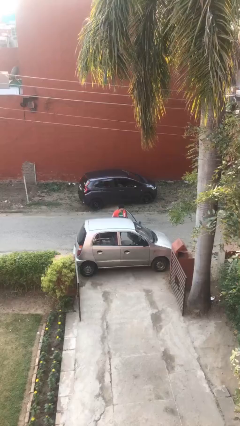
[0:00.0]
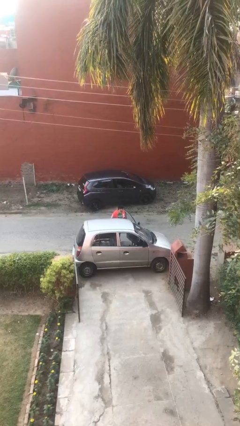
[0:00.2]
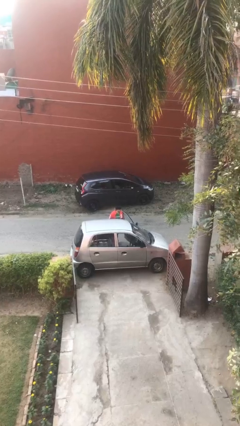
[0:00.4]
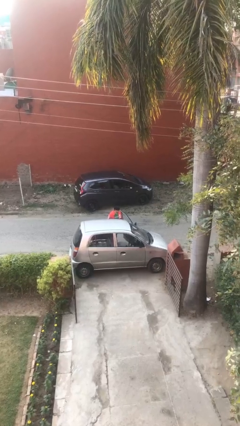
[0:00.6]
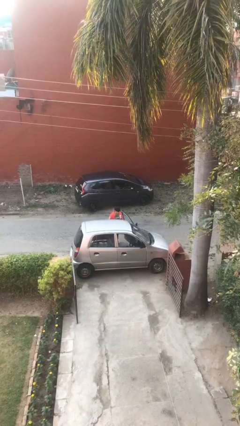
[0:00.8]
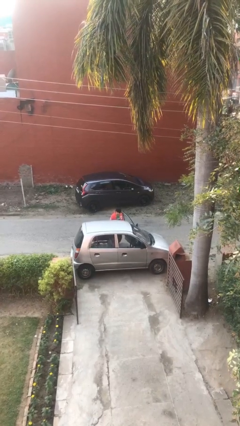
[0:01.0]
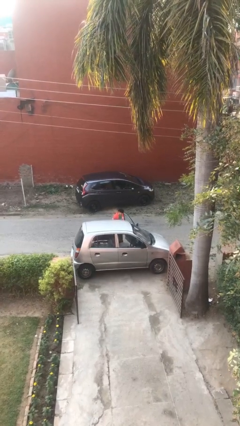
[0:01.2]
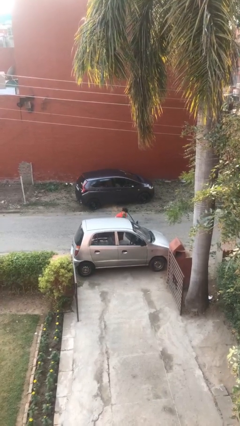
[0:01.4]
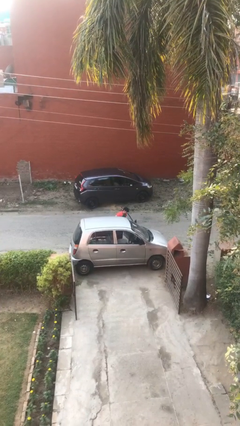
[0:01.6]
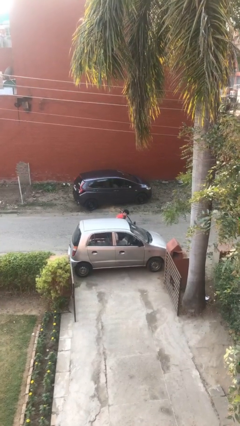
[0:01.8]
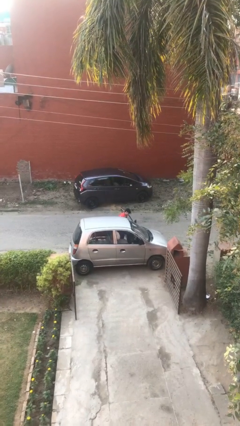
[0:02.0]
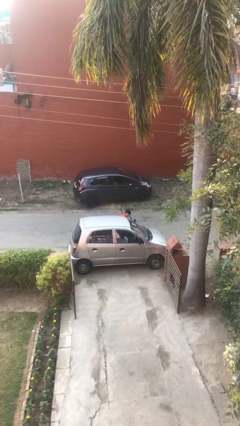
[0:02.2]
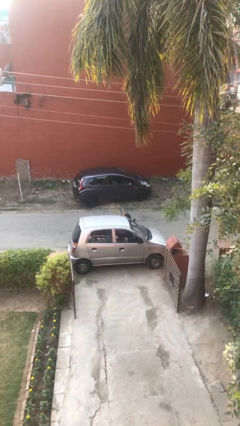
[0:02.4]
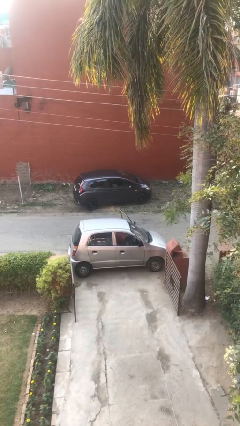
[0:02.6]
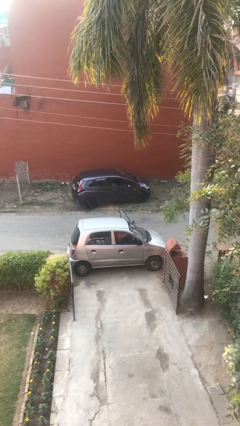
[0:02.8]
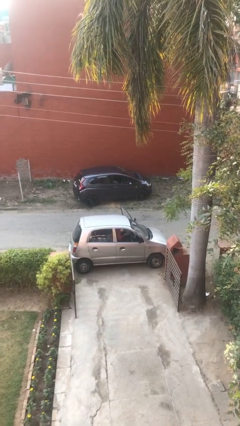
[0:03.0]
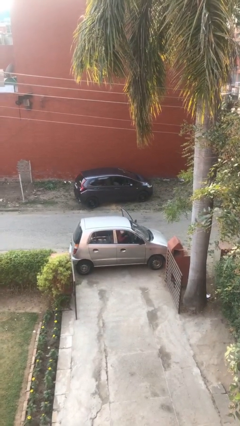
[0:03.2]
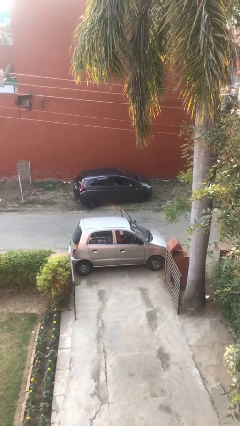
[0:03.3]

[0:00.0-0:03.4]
person enters car

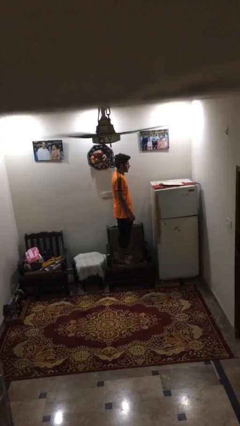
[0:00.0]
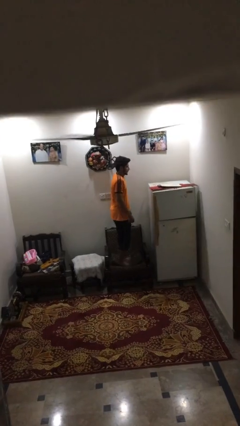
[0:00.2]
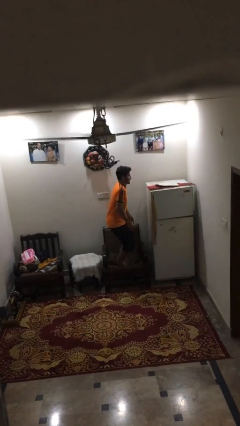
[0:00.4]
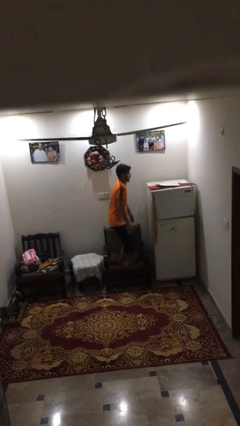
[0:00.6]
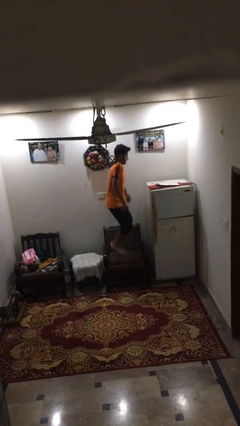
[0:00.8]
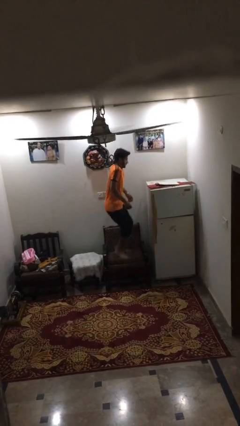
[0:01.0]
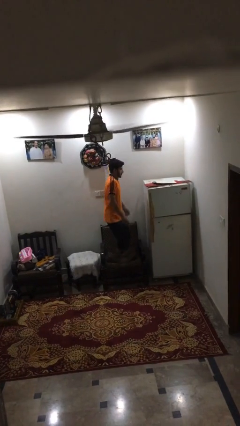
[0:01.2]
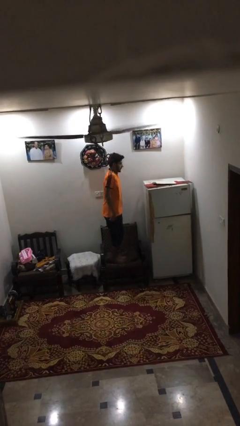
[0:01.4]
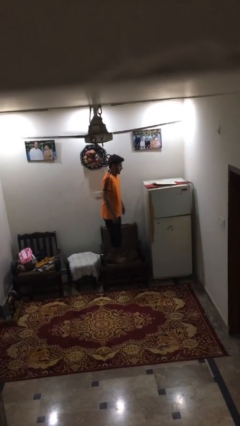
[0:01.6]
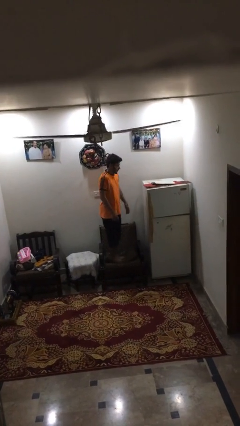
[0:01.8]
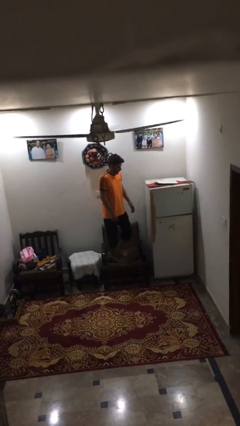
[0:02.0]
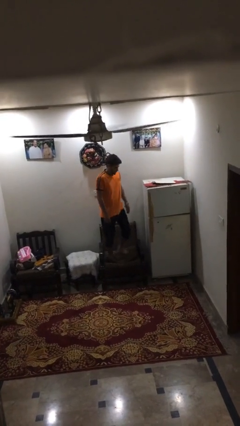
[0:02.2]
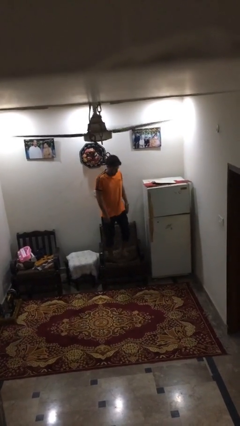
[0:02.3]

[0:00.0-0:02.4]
person jumps on couch

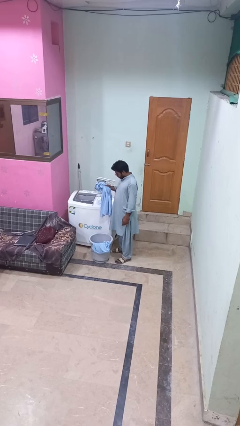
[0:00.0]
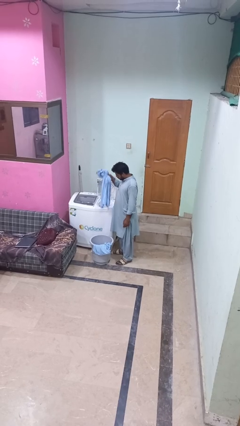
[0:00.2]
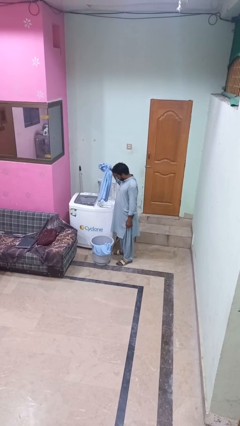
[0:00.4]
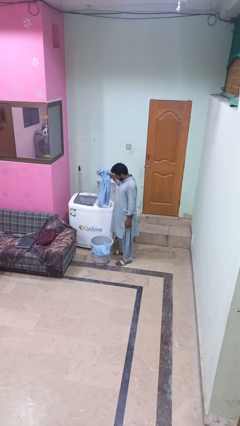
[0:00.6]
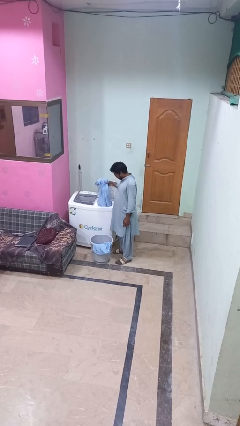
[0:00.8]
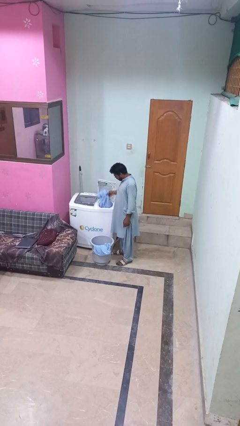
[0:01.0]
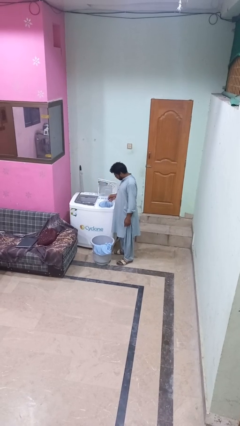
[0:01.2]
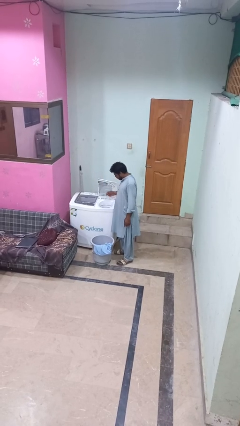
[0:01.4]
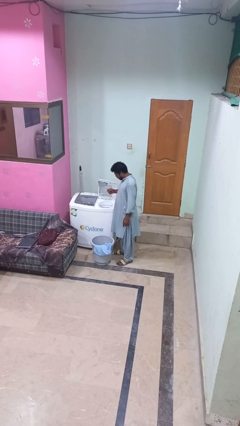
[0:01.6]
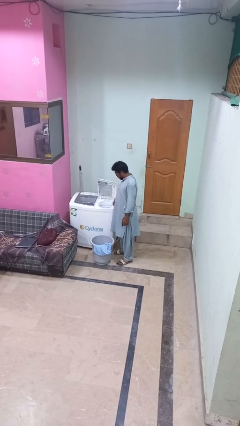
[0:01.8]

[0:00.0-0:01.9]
person loads dryer

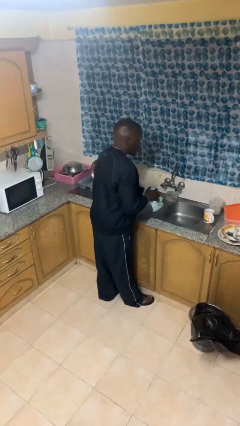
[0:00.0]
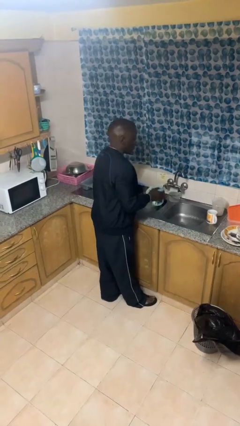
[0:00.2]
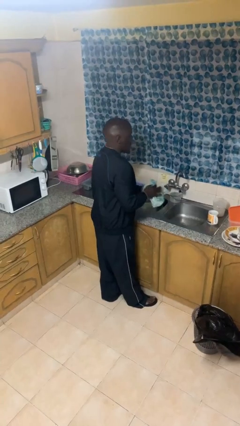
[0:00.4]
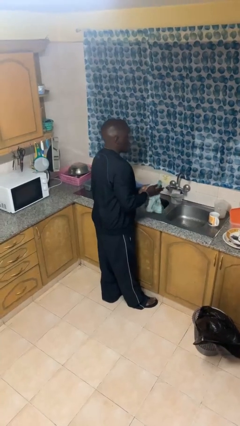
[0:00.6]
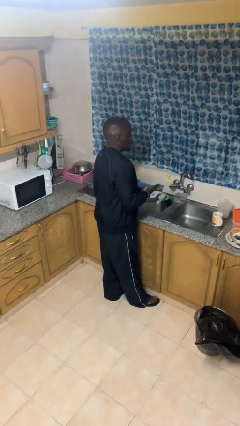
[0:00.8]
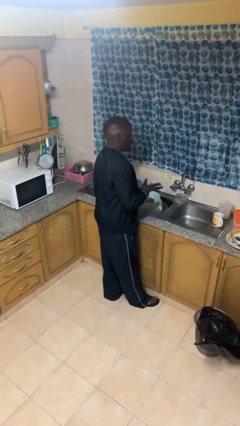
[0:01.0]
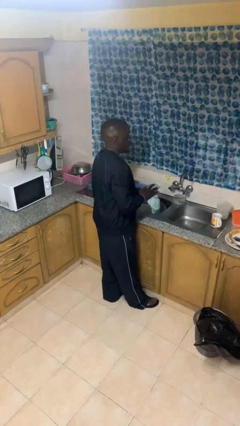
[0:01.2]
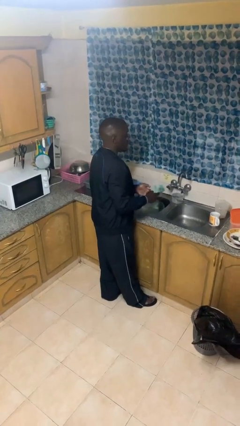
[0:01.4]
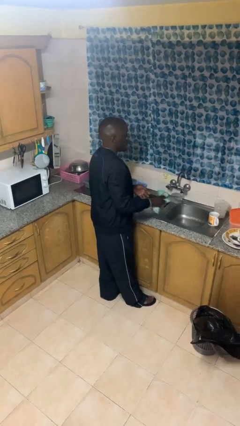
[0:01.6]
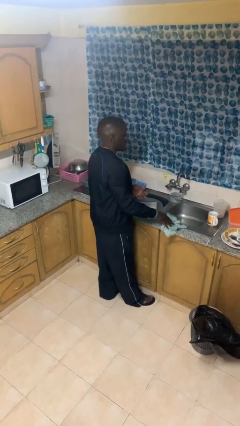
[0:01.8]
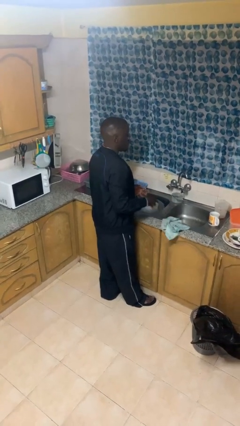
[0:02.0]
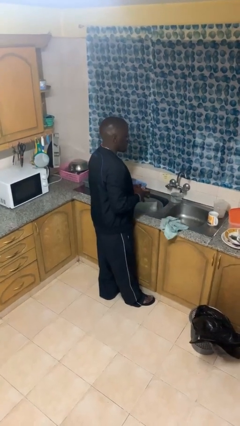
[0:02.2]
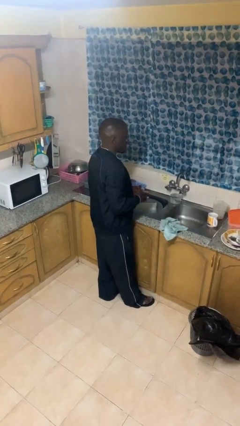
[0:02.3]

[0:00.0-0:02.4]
person dries hands with towel

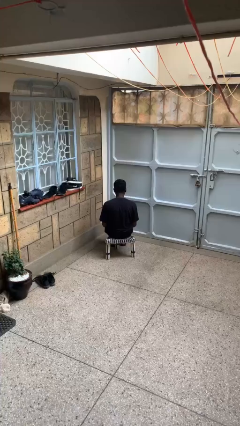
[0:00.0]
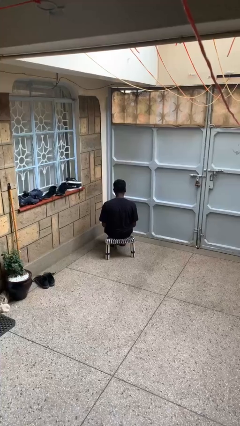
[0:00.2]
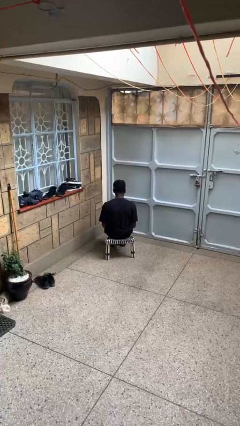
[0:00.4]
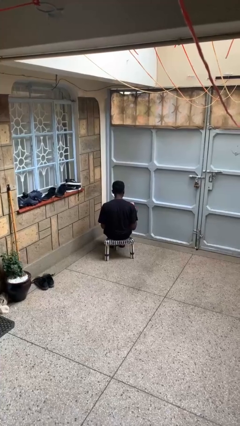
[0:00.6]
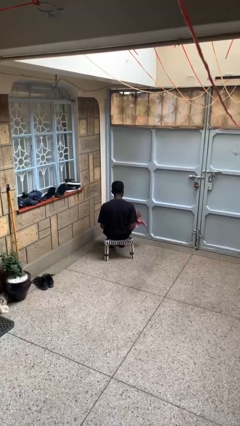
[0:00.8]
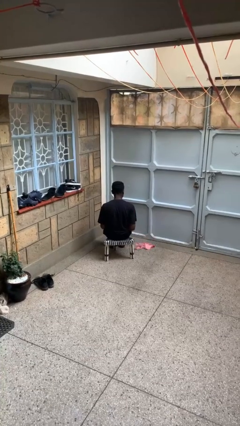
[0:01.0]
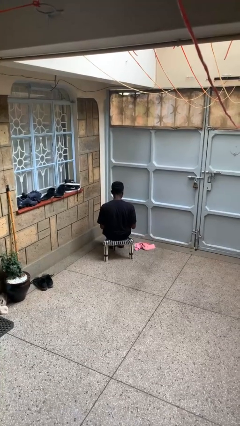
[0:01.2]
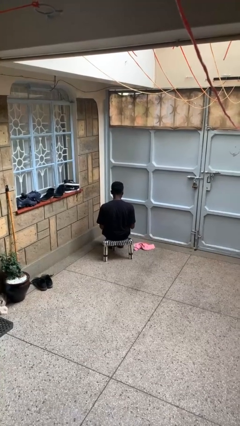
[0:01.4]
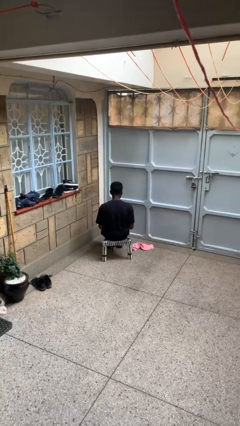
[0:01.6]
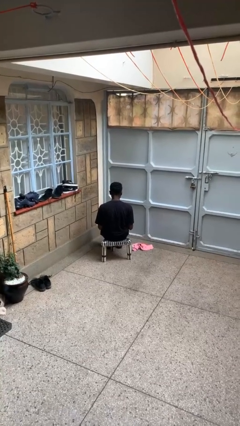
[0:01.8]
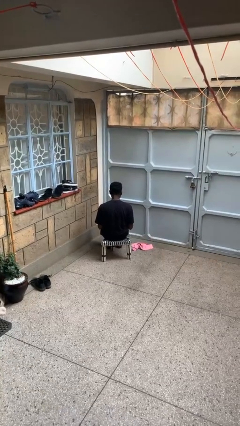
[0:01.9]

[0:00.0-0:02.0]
person throws object to ground

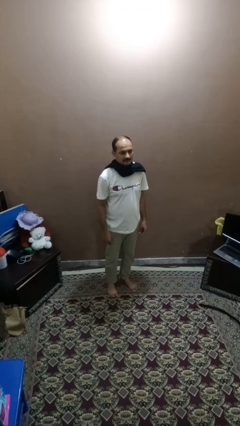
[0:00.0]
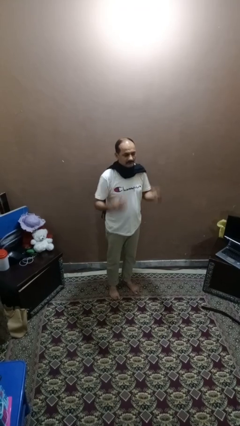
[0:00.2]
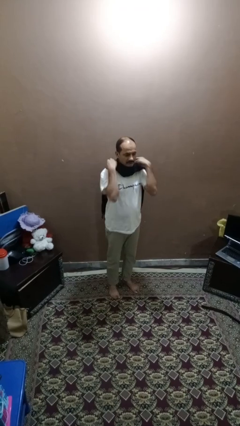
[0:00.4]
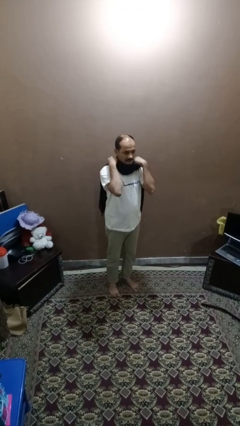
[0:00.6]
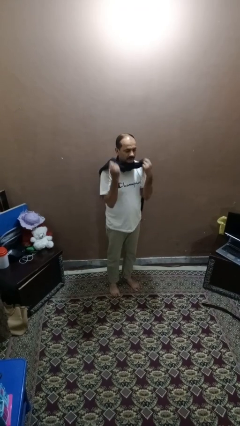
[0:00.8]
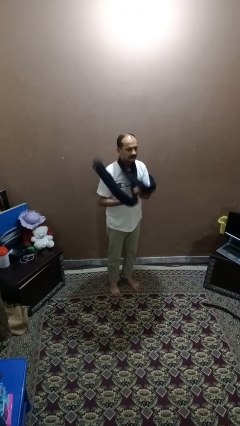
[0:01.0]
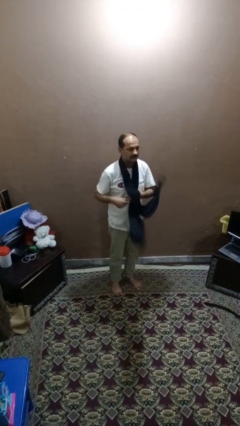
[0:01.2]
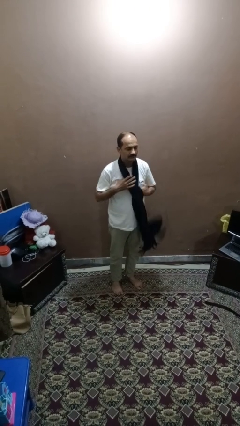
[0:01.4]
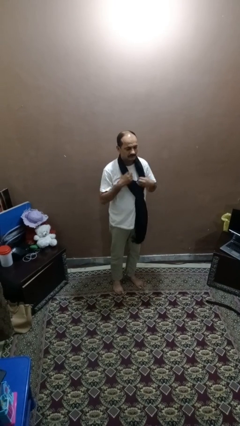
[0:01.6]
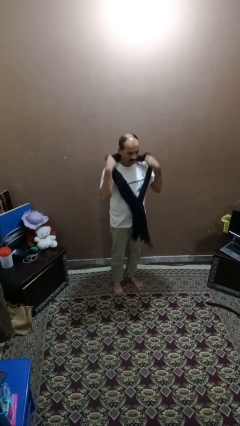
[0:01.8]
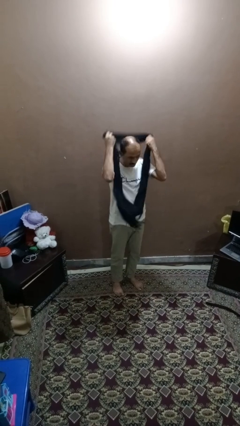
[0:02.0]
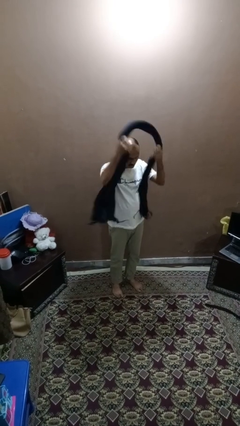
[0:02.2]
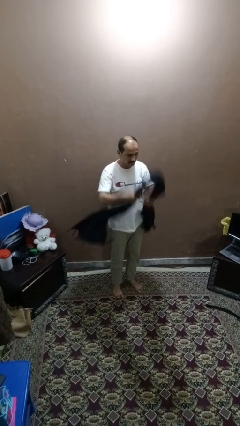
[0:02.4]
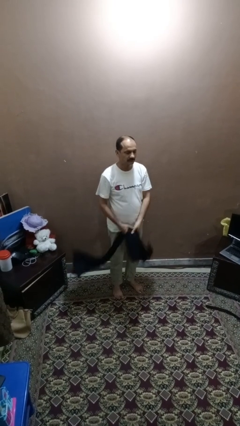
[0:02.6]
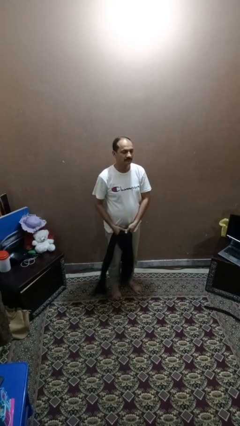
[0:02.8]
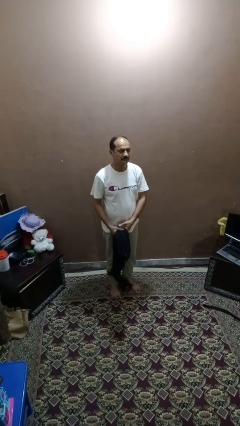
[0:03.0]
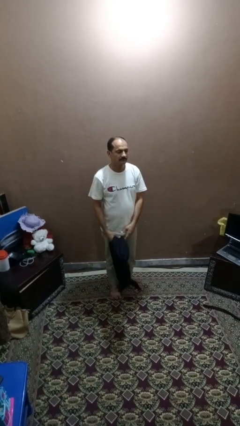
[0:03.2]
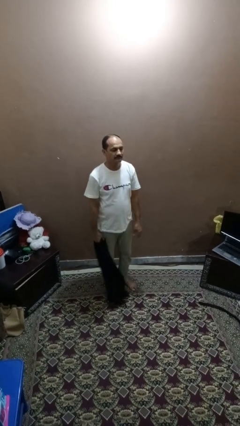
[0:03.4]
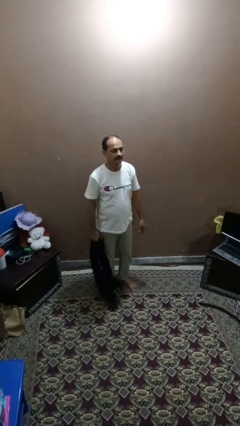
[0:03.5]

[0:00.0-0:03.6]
person takes off scarf

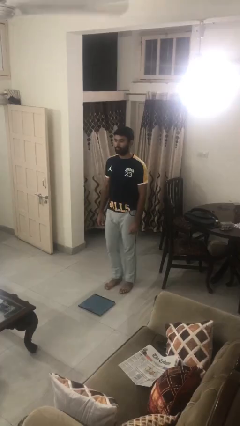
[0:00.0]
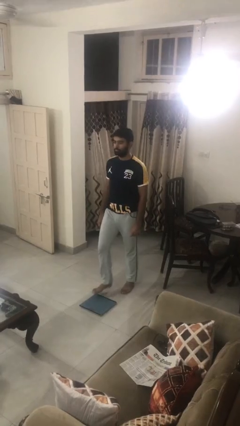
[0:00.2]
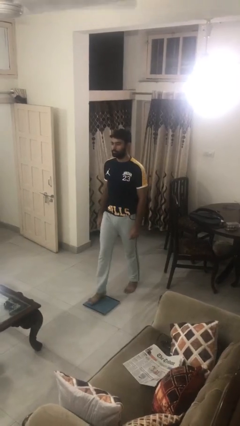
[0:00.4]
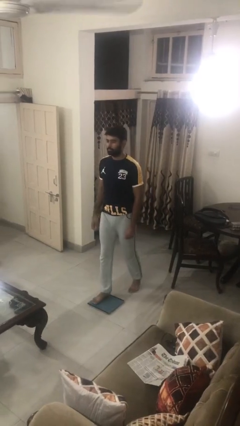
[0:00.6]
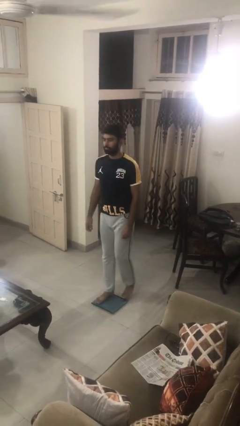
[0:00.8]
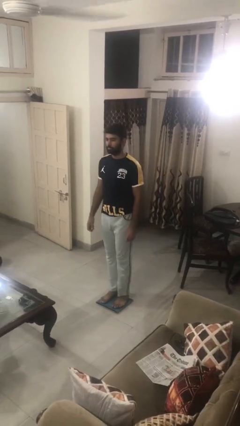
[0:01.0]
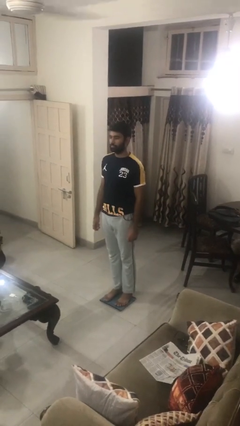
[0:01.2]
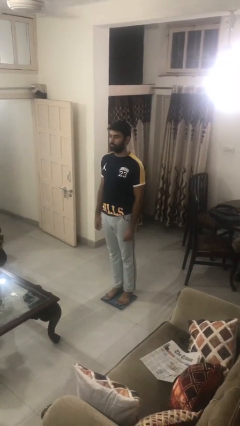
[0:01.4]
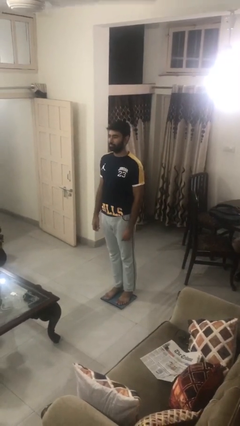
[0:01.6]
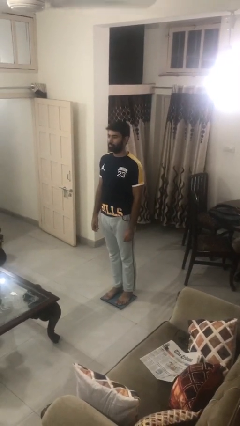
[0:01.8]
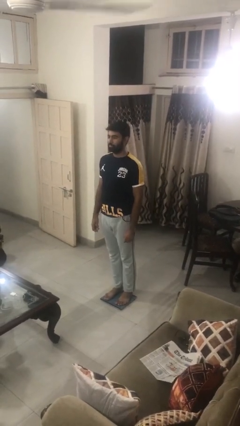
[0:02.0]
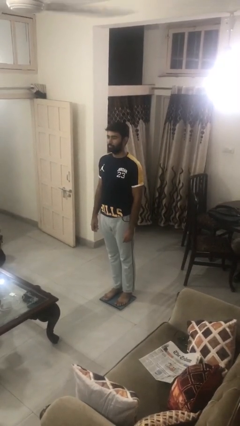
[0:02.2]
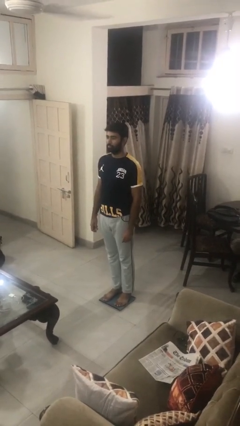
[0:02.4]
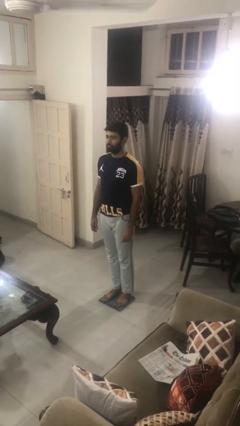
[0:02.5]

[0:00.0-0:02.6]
person uses bodyweight scale
